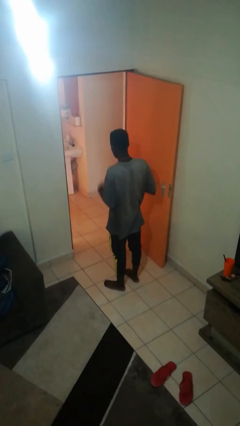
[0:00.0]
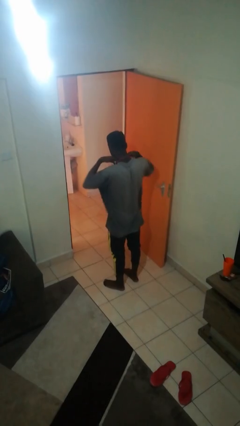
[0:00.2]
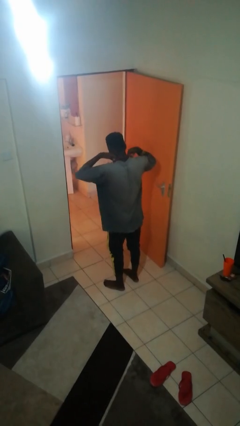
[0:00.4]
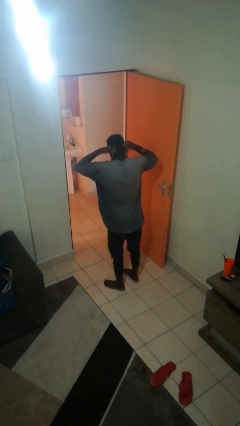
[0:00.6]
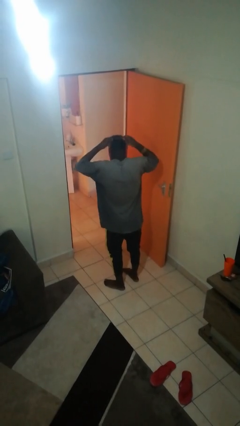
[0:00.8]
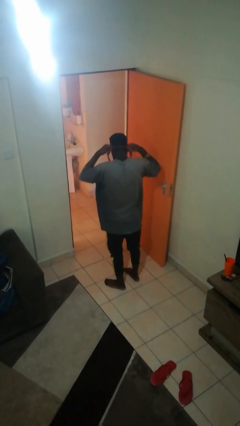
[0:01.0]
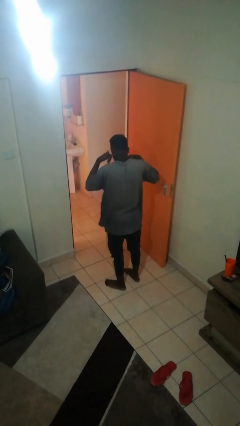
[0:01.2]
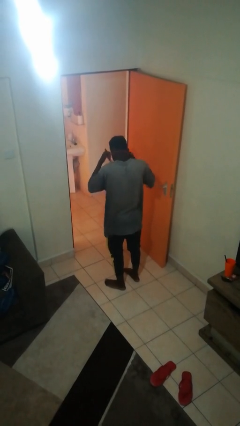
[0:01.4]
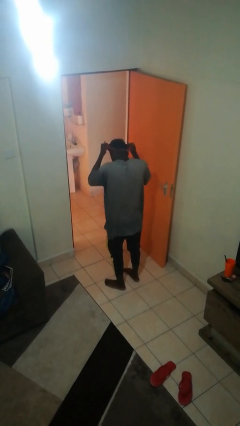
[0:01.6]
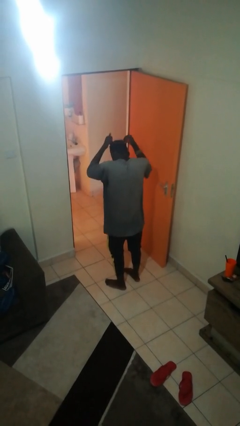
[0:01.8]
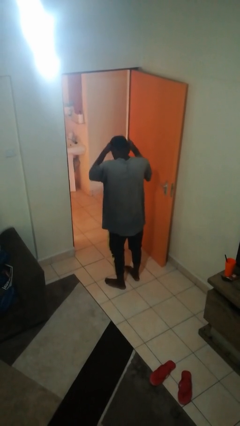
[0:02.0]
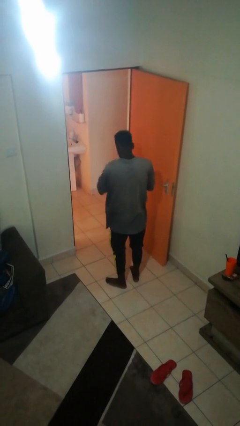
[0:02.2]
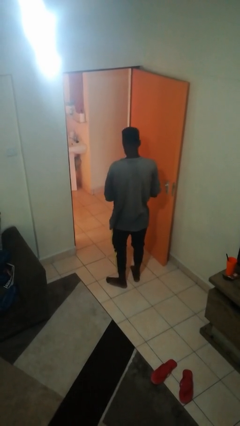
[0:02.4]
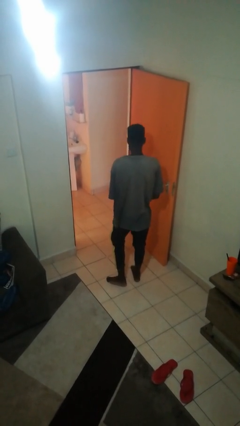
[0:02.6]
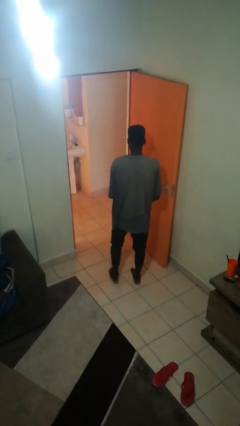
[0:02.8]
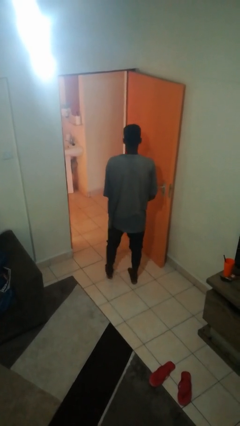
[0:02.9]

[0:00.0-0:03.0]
person takes off necklace

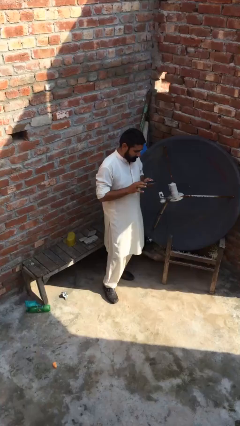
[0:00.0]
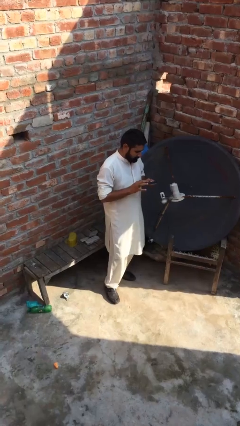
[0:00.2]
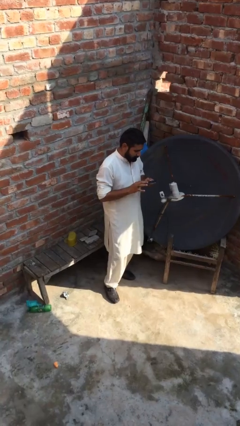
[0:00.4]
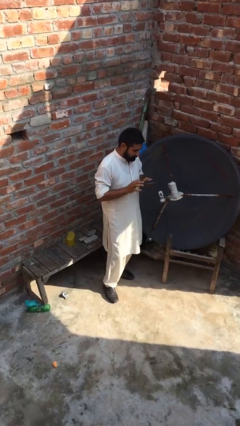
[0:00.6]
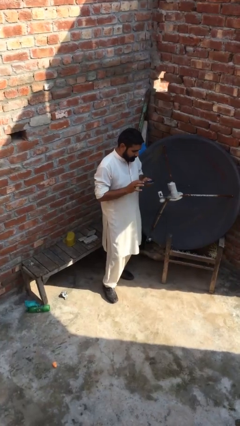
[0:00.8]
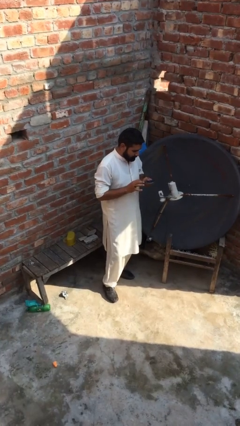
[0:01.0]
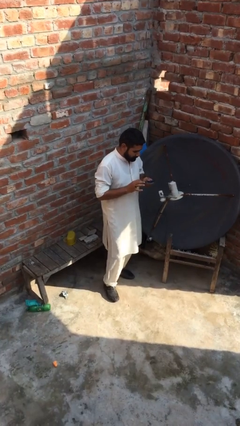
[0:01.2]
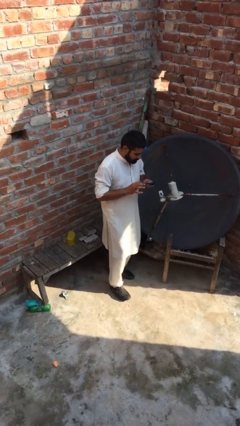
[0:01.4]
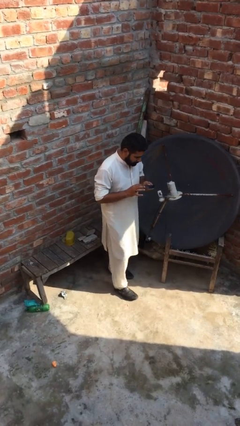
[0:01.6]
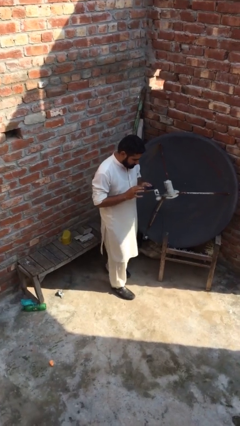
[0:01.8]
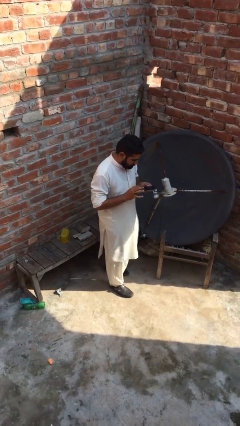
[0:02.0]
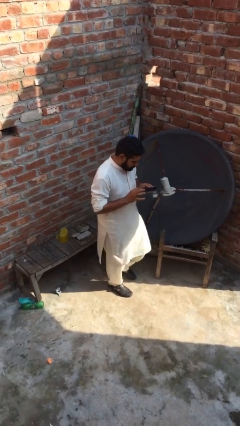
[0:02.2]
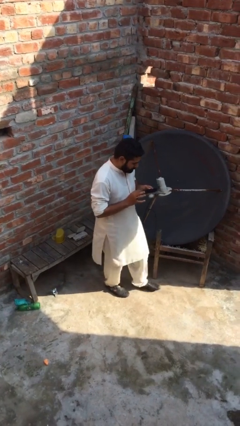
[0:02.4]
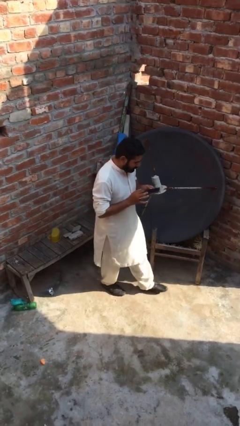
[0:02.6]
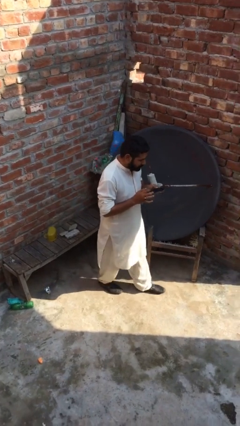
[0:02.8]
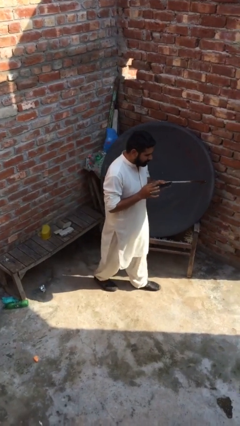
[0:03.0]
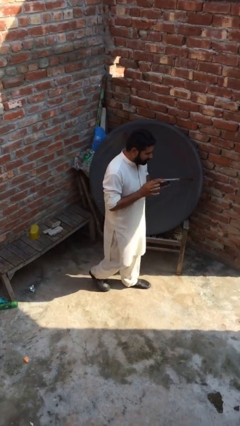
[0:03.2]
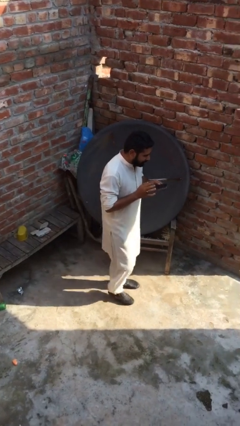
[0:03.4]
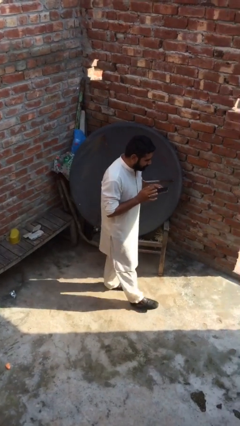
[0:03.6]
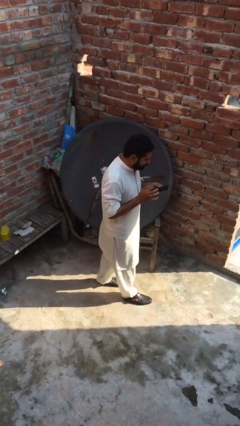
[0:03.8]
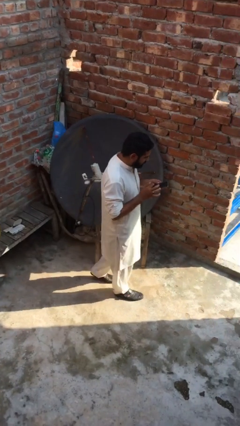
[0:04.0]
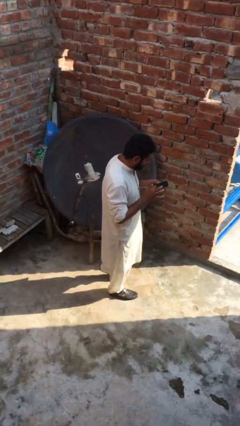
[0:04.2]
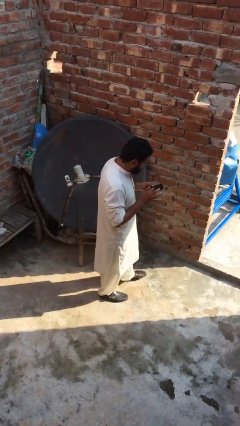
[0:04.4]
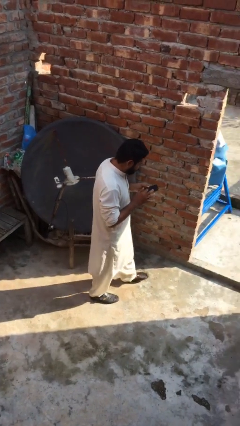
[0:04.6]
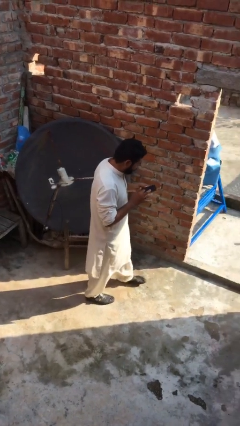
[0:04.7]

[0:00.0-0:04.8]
person texts on phone

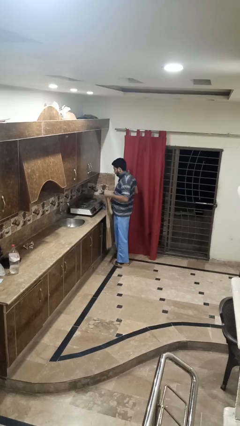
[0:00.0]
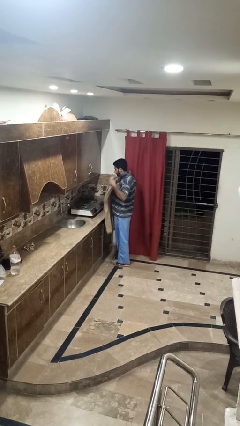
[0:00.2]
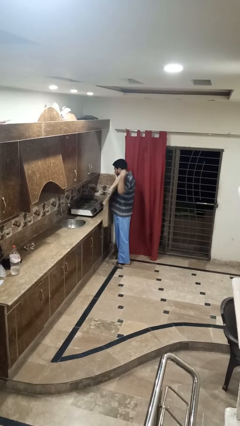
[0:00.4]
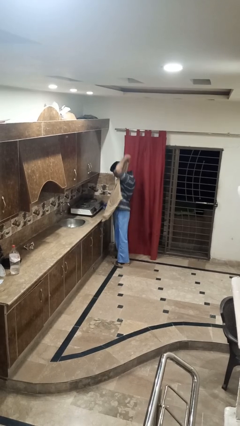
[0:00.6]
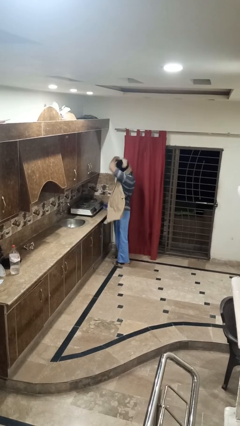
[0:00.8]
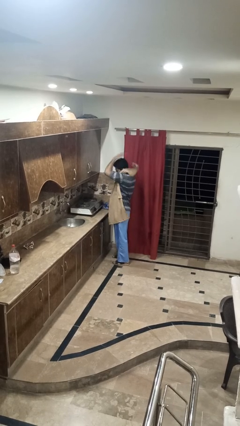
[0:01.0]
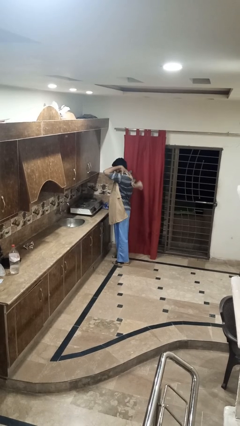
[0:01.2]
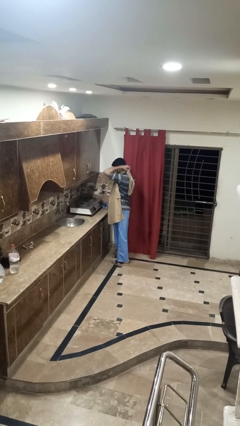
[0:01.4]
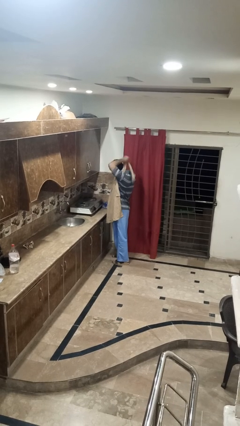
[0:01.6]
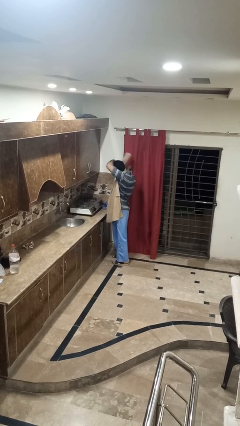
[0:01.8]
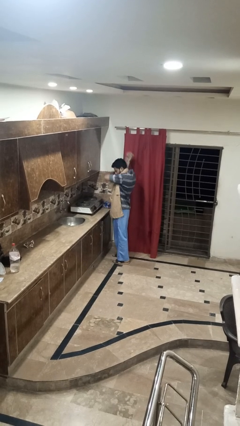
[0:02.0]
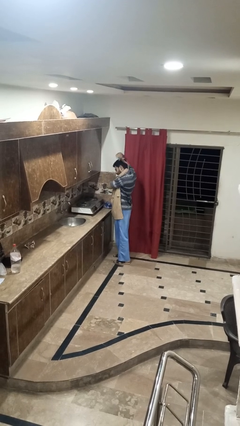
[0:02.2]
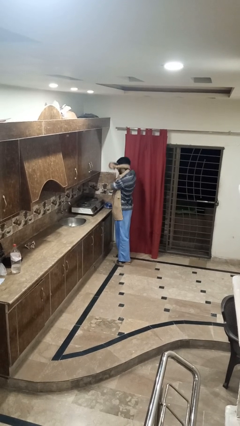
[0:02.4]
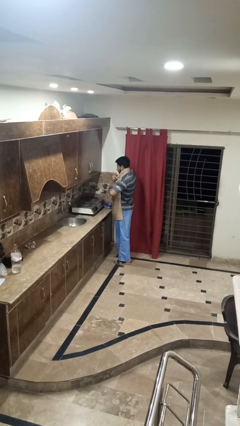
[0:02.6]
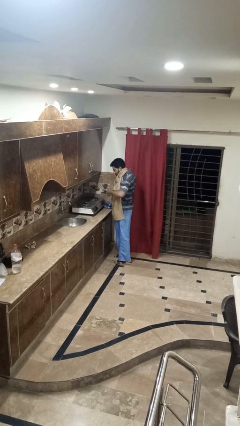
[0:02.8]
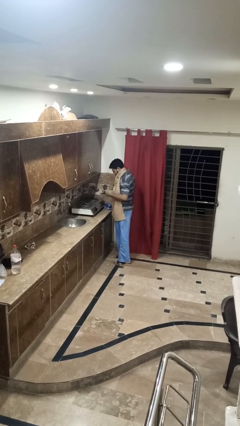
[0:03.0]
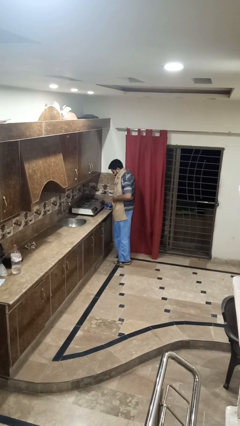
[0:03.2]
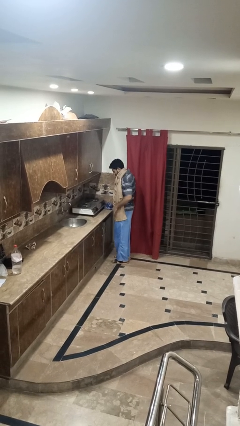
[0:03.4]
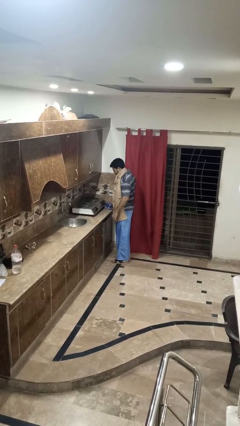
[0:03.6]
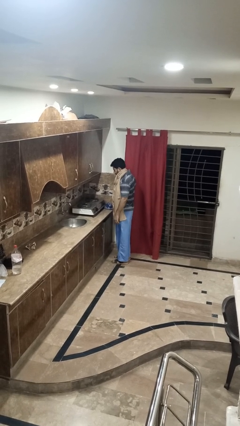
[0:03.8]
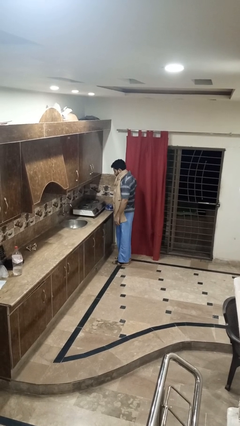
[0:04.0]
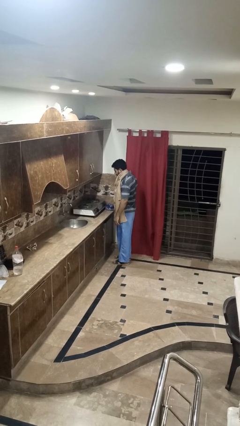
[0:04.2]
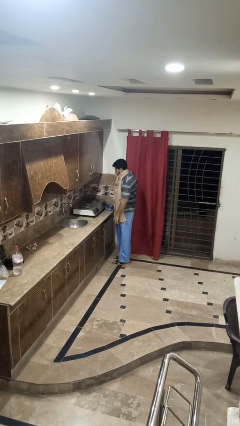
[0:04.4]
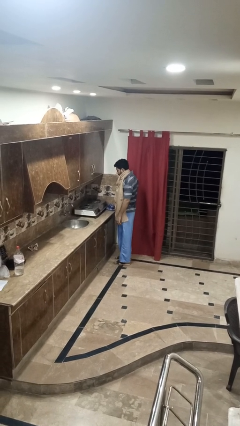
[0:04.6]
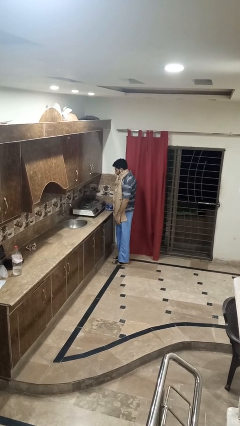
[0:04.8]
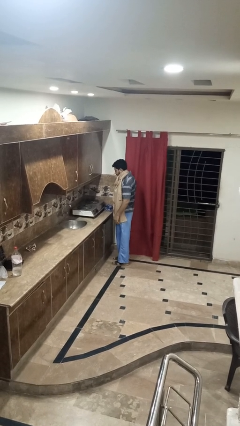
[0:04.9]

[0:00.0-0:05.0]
person puts on apron

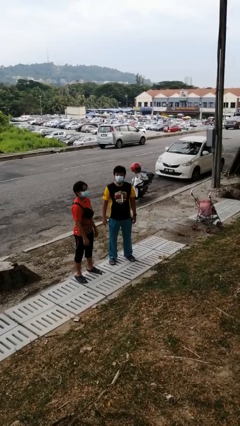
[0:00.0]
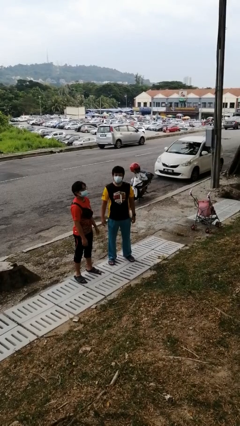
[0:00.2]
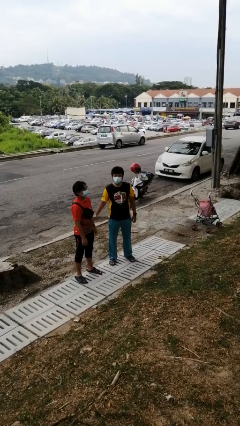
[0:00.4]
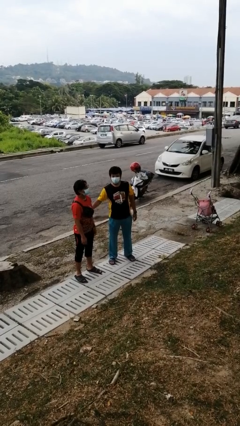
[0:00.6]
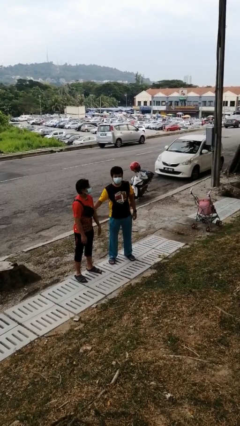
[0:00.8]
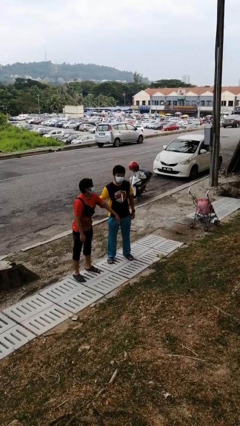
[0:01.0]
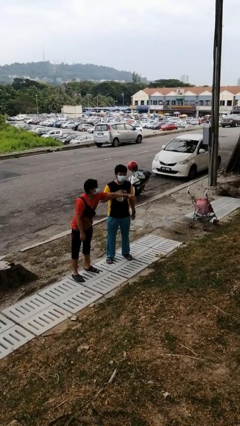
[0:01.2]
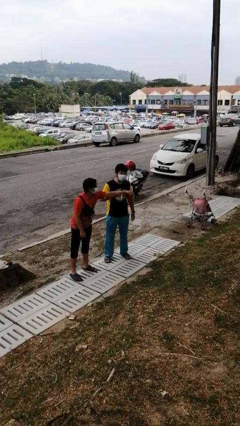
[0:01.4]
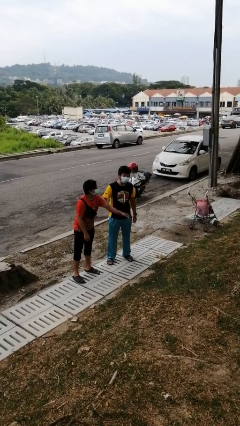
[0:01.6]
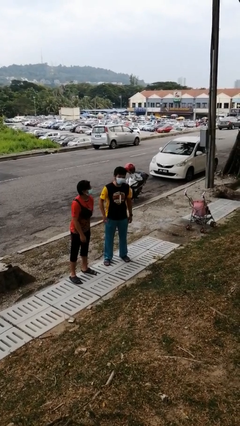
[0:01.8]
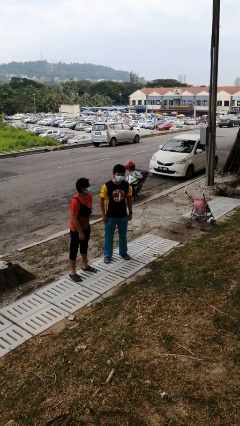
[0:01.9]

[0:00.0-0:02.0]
person grabs person by bicep

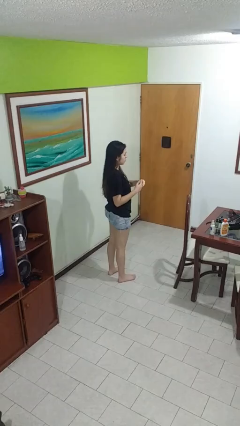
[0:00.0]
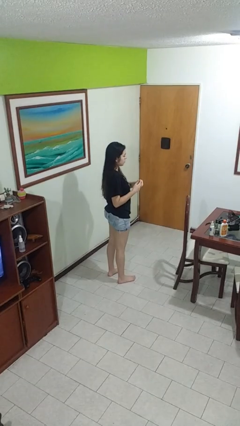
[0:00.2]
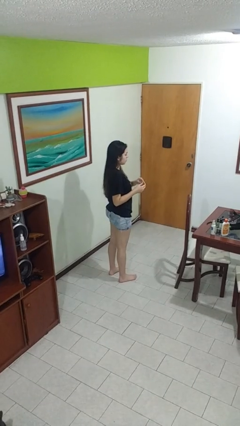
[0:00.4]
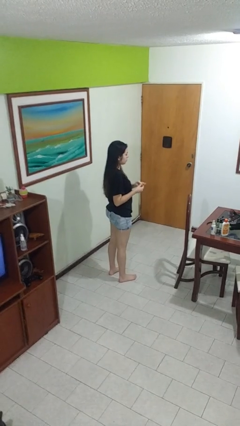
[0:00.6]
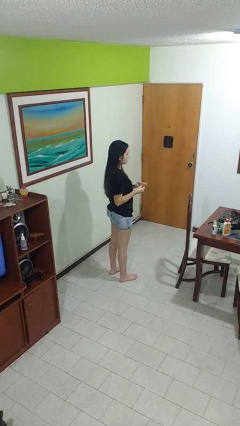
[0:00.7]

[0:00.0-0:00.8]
person takes off ring

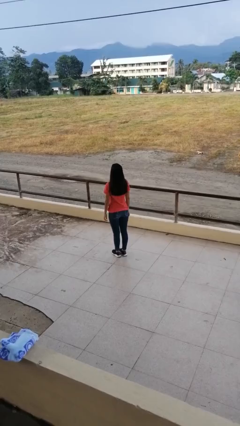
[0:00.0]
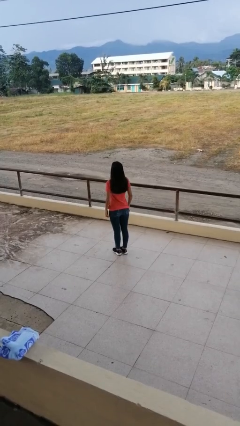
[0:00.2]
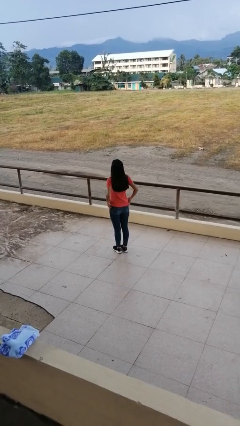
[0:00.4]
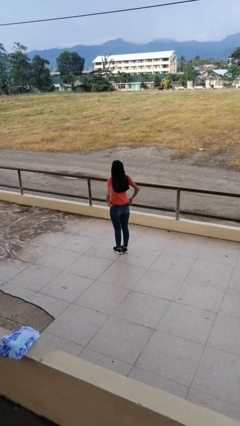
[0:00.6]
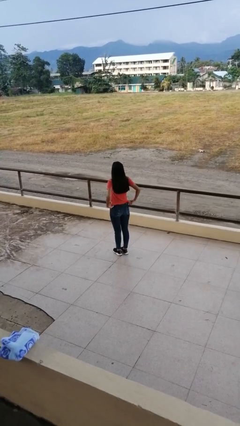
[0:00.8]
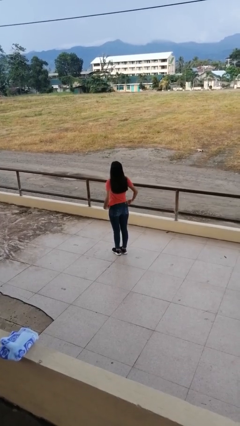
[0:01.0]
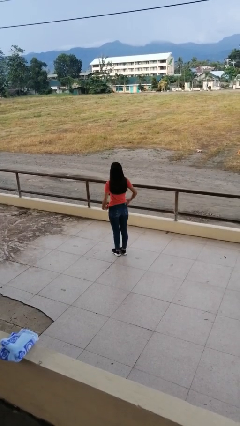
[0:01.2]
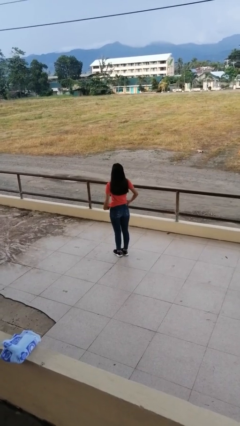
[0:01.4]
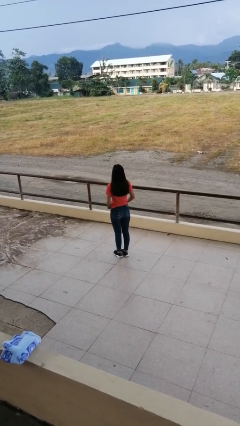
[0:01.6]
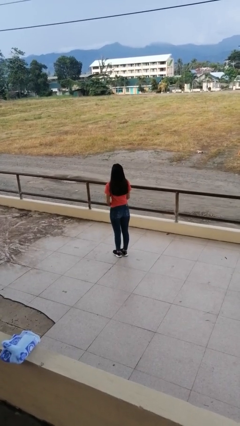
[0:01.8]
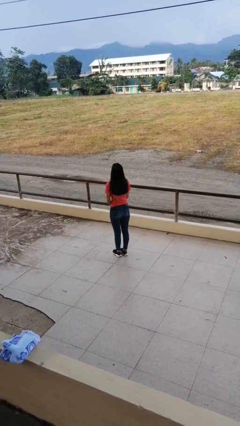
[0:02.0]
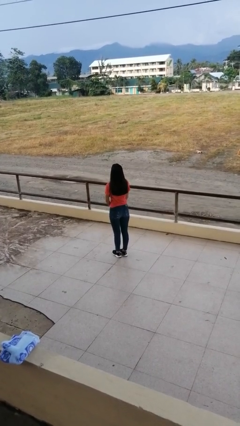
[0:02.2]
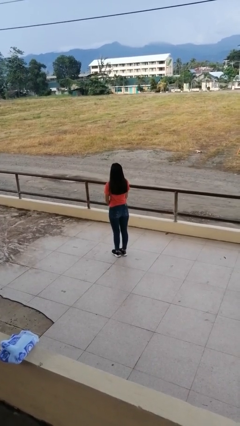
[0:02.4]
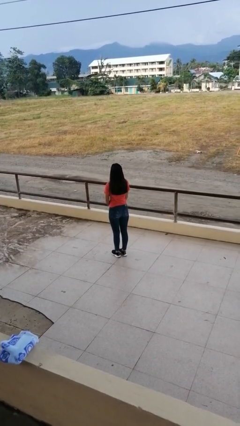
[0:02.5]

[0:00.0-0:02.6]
person tucks in shirt
